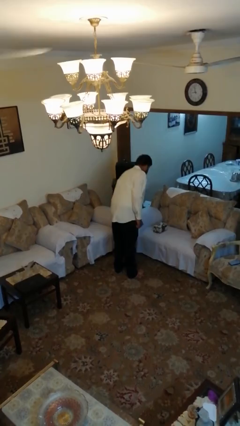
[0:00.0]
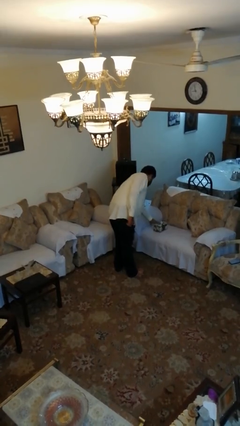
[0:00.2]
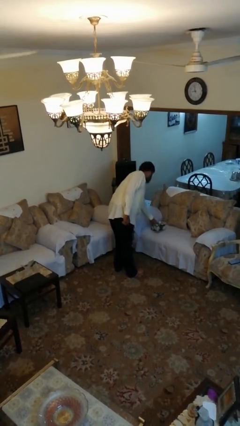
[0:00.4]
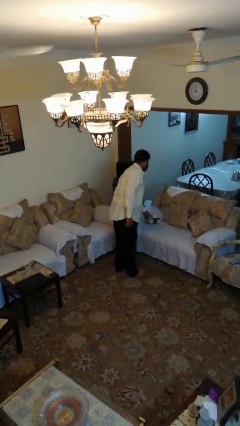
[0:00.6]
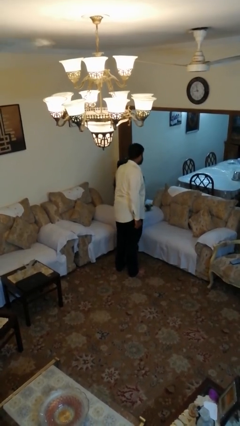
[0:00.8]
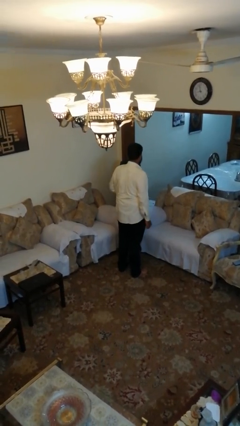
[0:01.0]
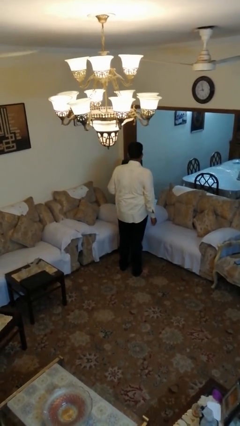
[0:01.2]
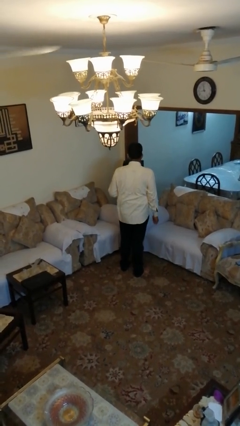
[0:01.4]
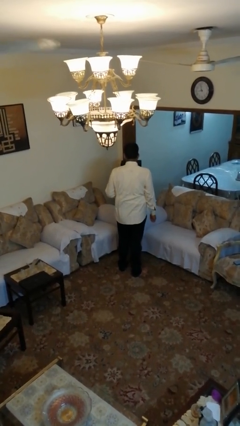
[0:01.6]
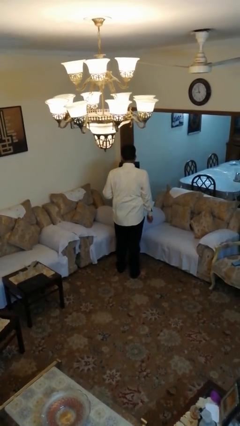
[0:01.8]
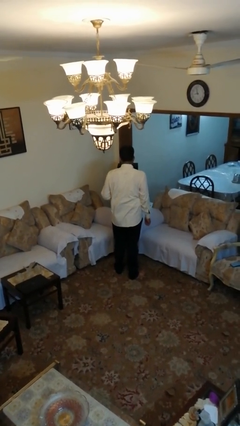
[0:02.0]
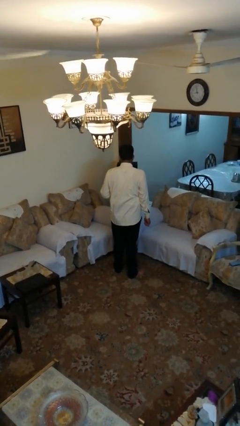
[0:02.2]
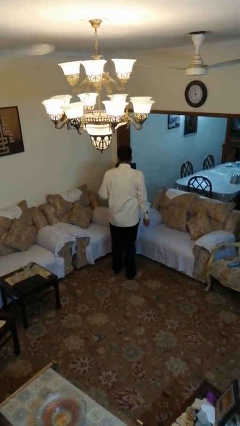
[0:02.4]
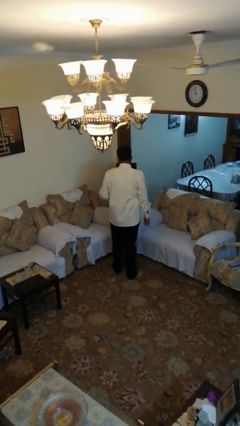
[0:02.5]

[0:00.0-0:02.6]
person picks up object from couch

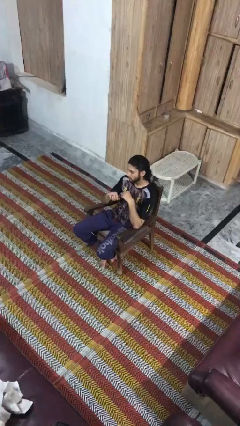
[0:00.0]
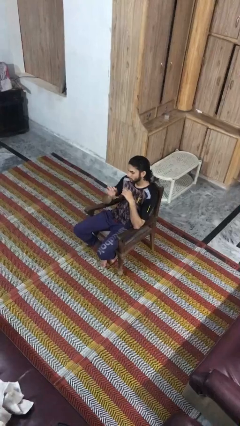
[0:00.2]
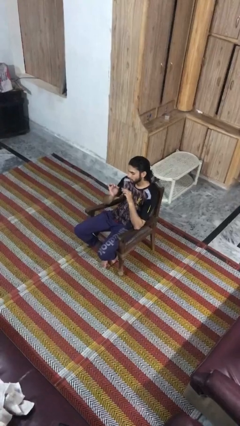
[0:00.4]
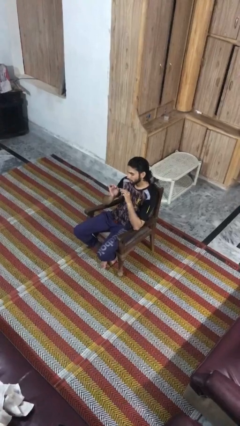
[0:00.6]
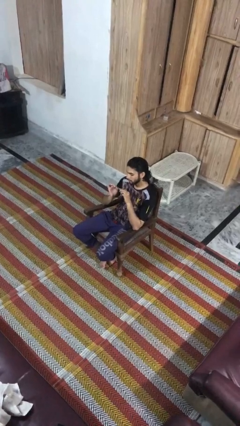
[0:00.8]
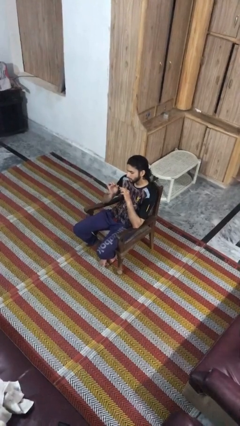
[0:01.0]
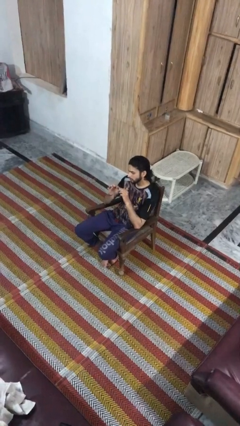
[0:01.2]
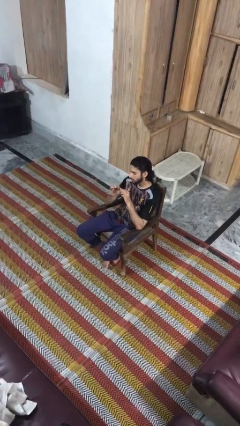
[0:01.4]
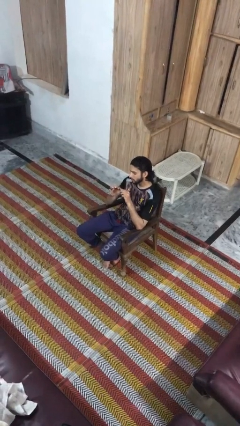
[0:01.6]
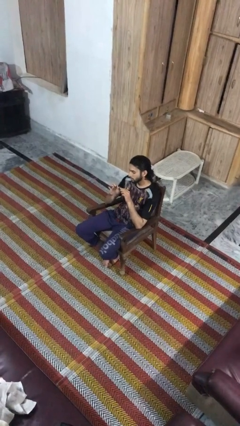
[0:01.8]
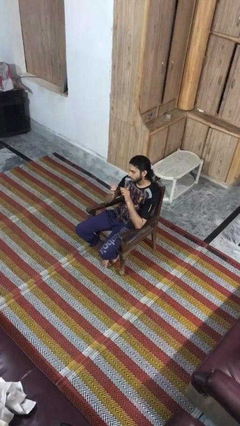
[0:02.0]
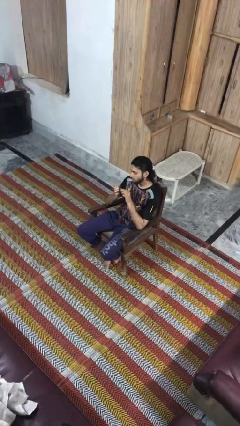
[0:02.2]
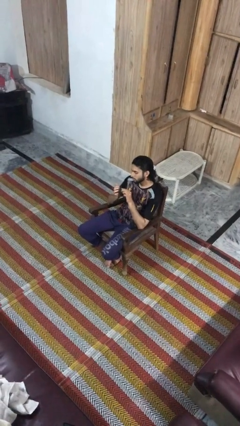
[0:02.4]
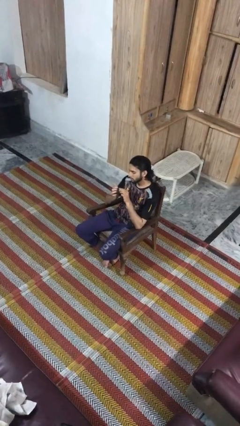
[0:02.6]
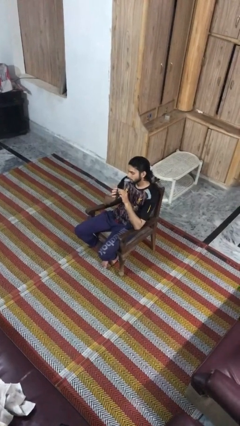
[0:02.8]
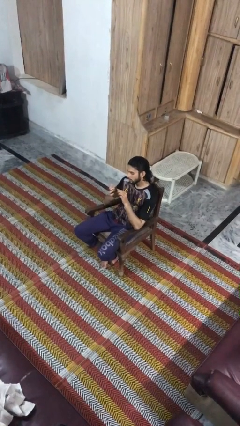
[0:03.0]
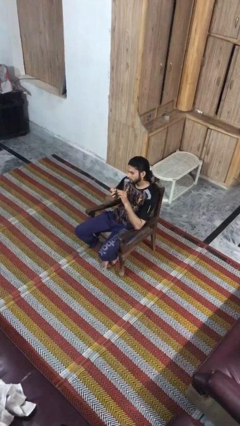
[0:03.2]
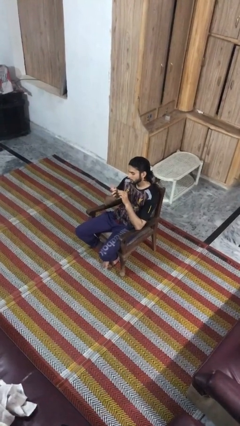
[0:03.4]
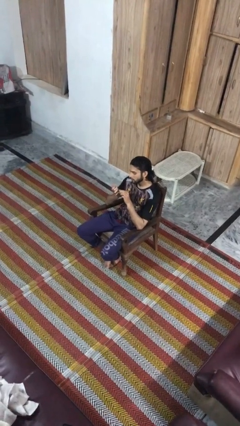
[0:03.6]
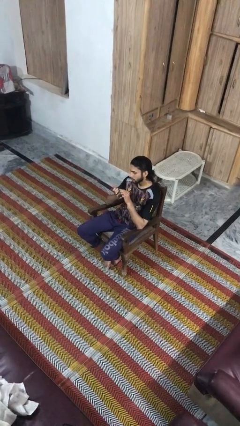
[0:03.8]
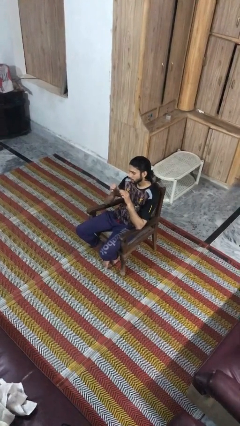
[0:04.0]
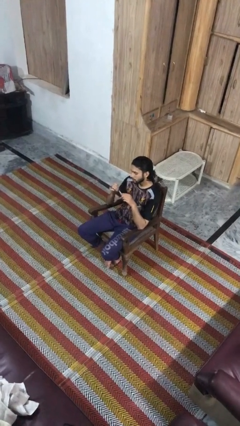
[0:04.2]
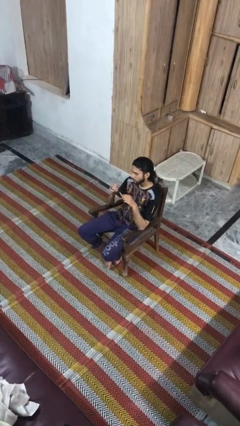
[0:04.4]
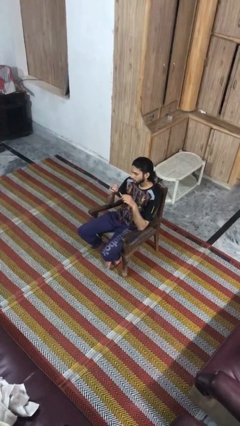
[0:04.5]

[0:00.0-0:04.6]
person files fingernails

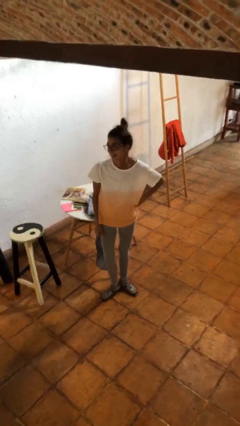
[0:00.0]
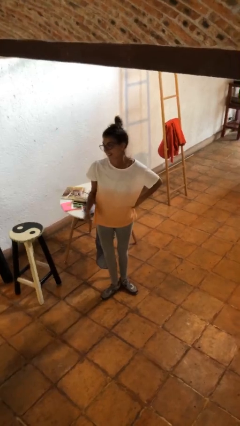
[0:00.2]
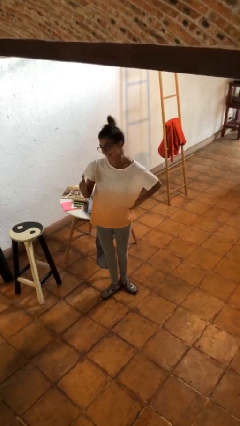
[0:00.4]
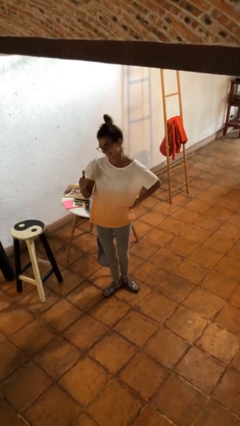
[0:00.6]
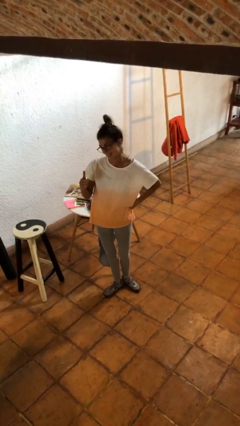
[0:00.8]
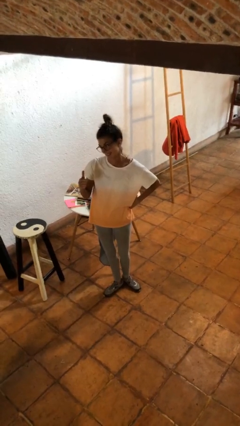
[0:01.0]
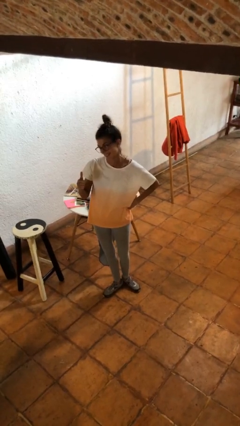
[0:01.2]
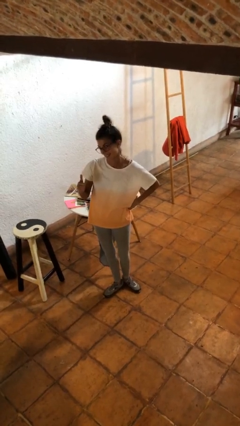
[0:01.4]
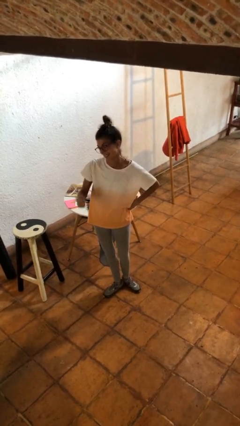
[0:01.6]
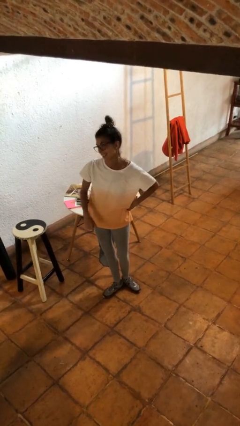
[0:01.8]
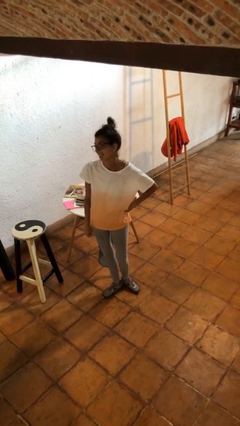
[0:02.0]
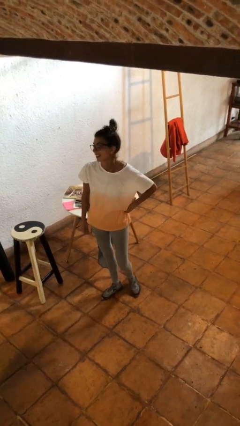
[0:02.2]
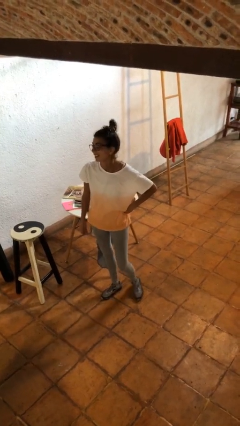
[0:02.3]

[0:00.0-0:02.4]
person gestures thumbs up

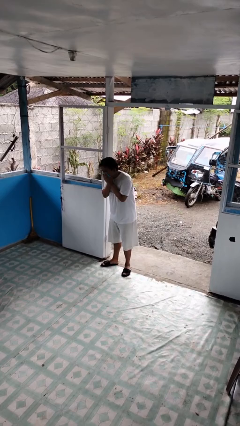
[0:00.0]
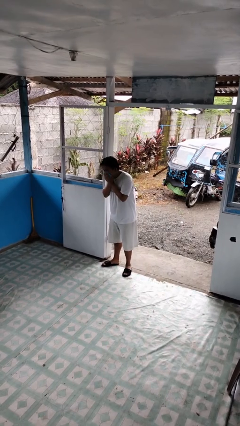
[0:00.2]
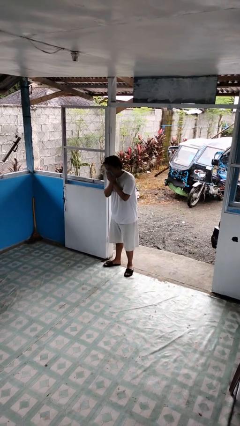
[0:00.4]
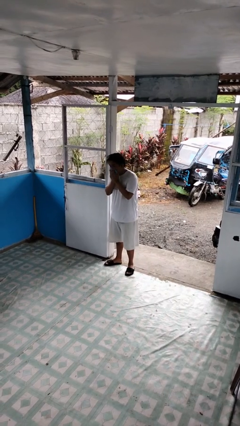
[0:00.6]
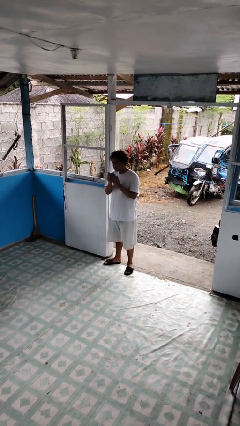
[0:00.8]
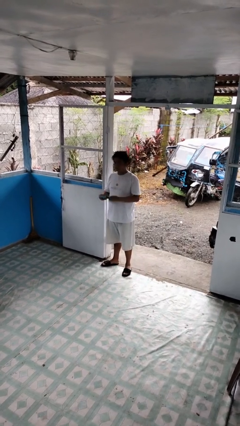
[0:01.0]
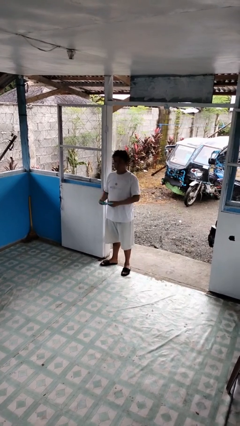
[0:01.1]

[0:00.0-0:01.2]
person blows nose

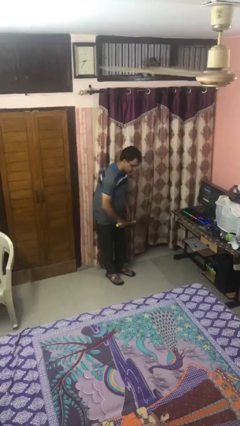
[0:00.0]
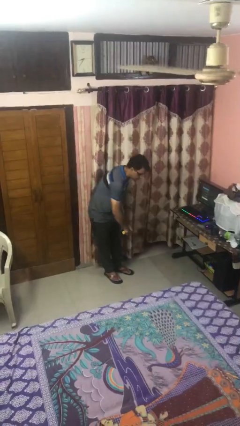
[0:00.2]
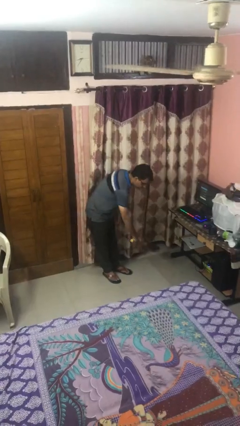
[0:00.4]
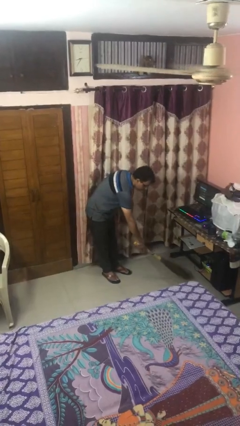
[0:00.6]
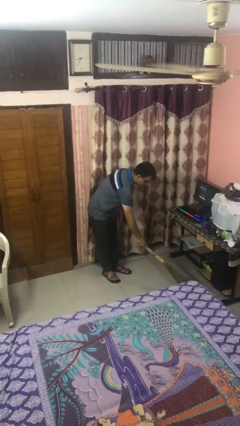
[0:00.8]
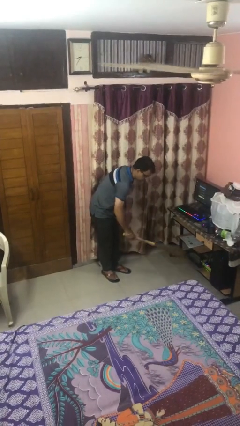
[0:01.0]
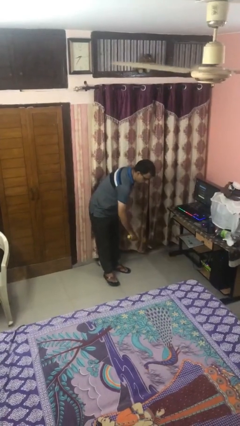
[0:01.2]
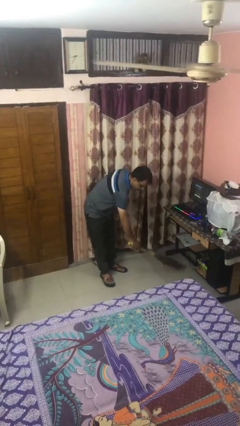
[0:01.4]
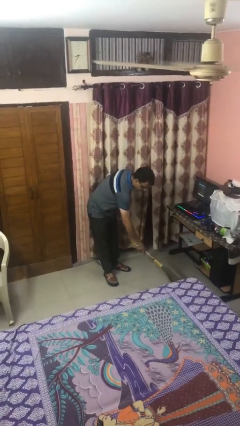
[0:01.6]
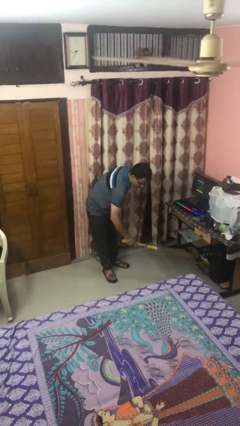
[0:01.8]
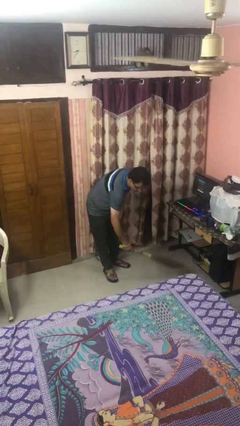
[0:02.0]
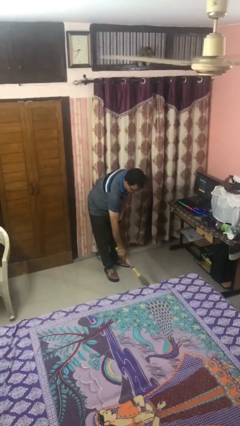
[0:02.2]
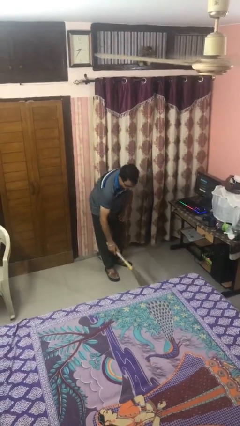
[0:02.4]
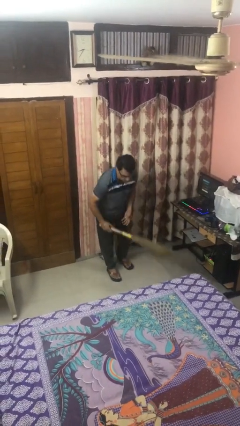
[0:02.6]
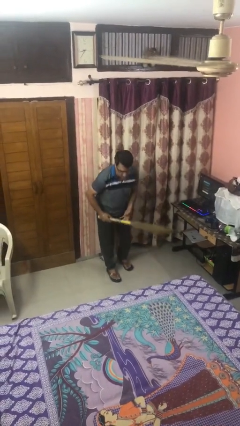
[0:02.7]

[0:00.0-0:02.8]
person sweeps floor

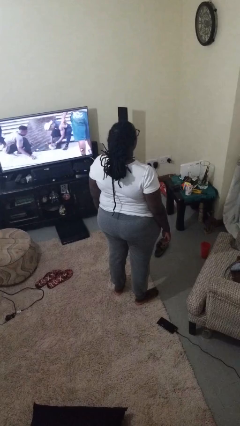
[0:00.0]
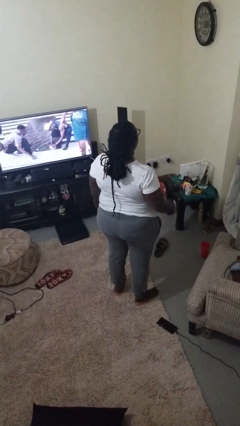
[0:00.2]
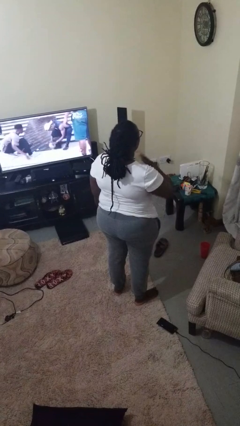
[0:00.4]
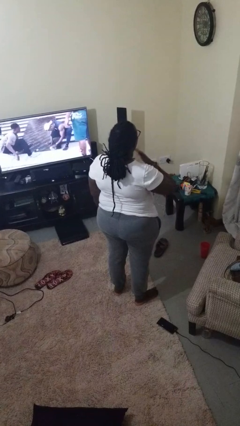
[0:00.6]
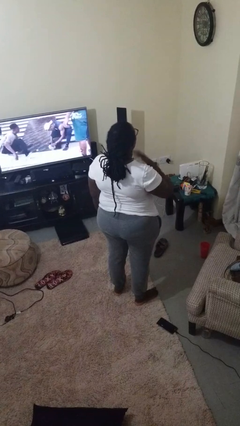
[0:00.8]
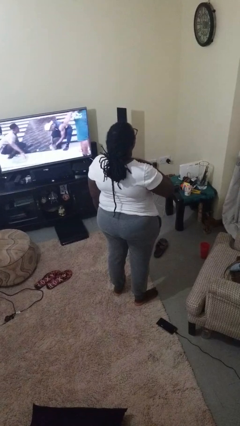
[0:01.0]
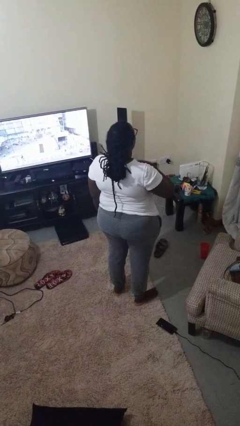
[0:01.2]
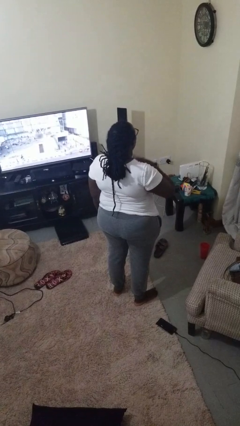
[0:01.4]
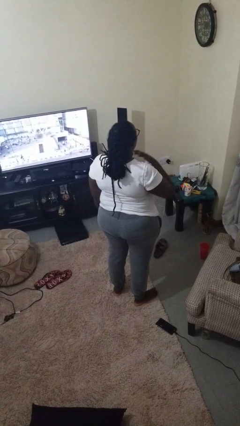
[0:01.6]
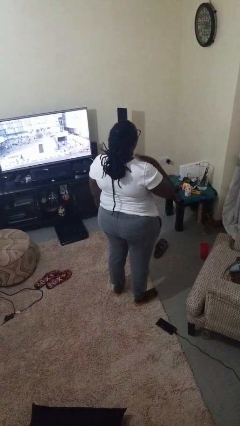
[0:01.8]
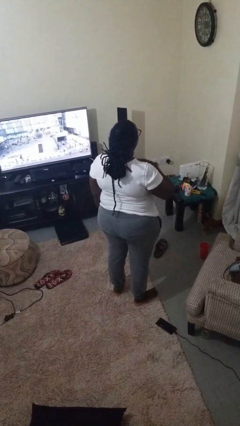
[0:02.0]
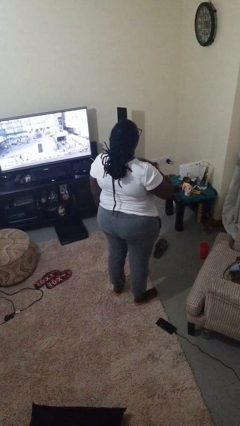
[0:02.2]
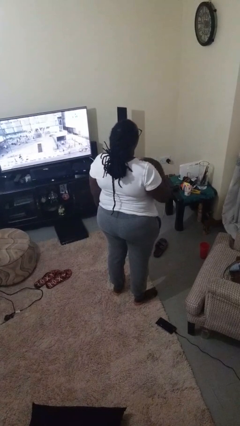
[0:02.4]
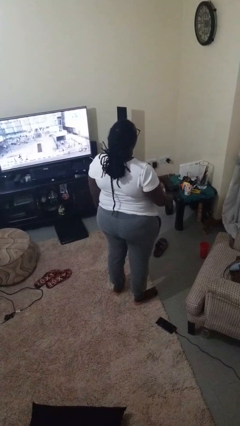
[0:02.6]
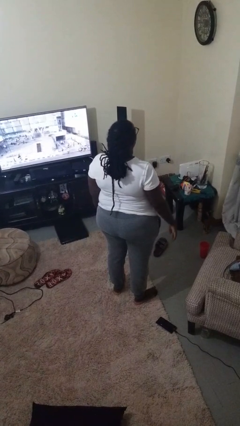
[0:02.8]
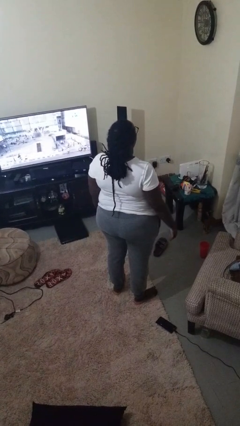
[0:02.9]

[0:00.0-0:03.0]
person drums on chest

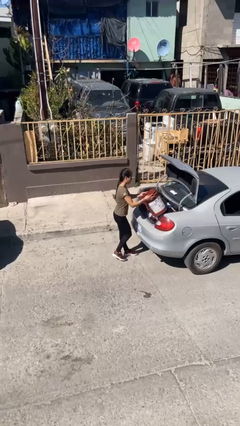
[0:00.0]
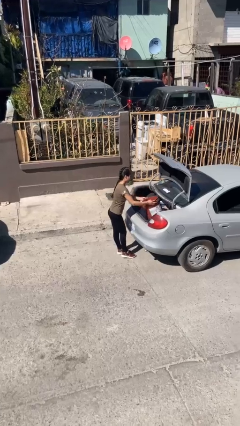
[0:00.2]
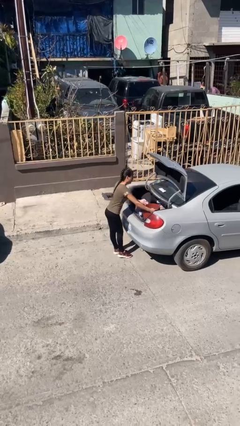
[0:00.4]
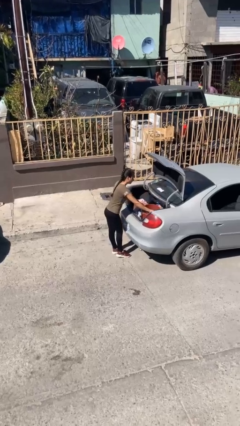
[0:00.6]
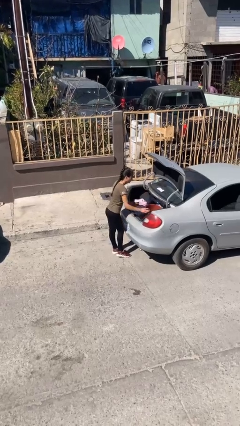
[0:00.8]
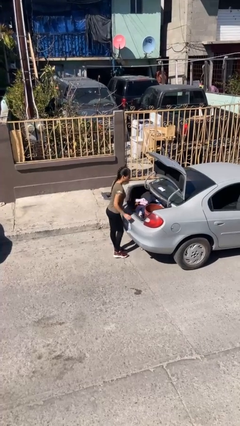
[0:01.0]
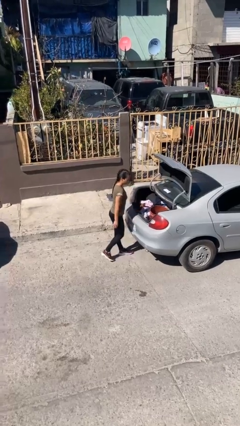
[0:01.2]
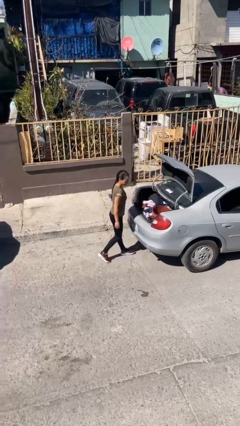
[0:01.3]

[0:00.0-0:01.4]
person loads car
